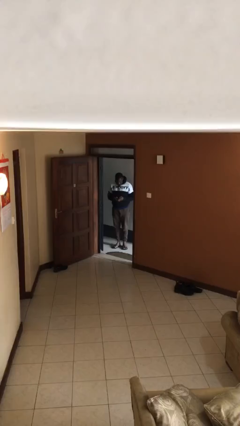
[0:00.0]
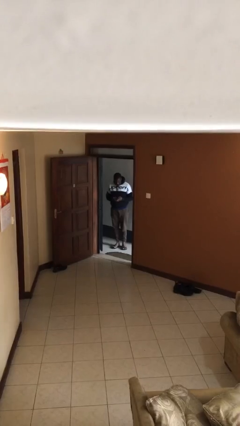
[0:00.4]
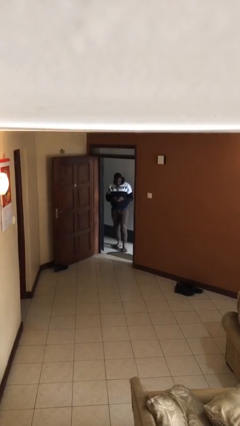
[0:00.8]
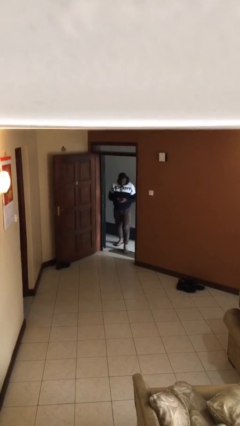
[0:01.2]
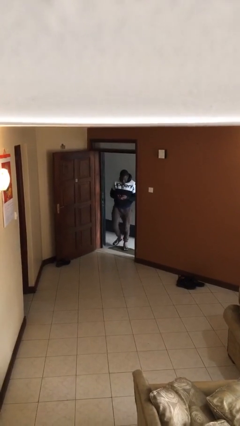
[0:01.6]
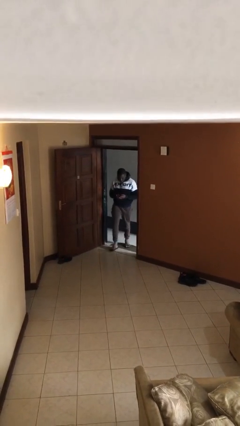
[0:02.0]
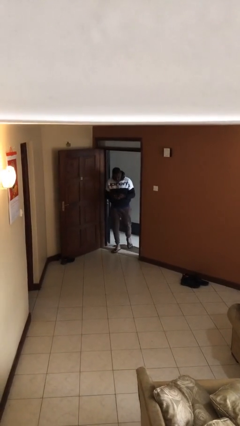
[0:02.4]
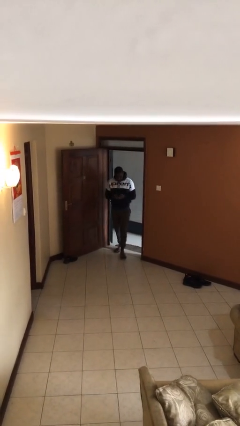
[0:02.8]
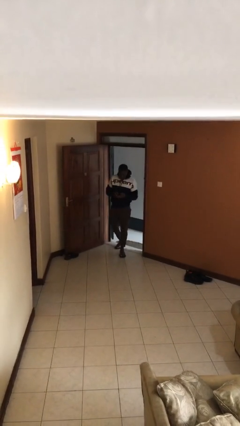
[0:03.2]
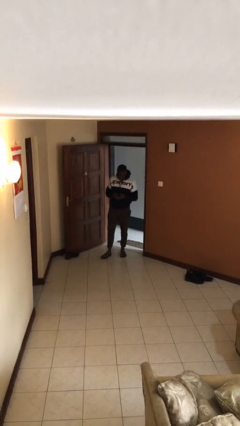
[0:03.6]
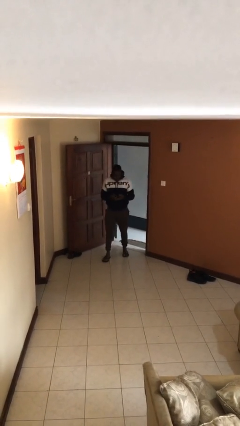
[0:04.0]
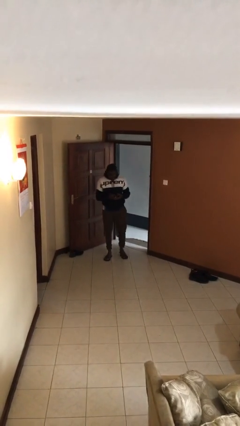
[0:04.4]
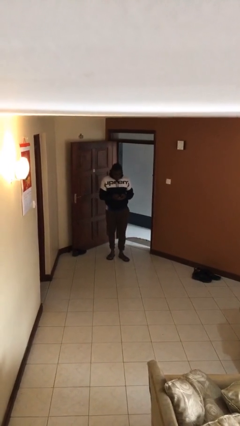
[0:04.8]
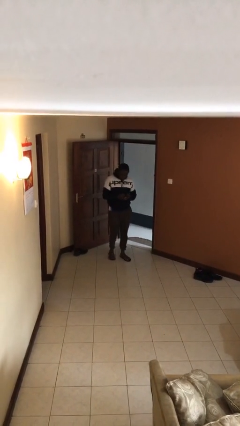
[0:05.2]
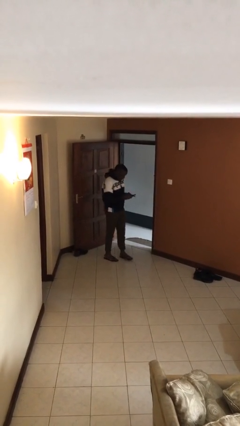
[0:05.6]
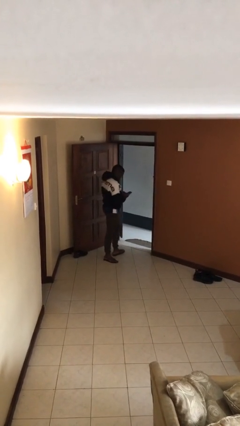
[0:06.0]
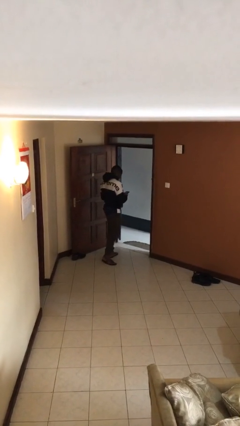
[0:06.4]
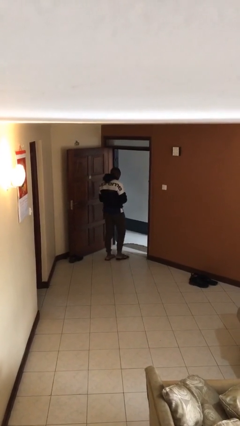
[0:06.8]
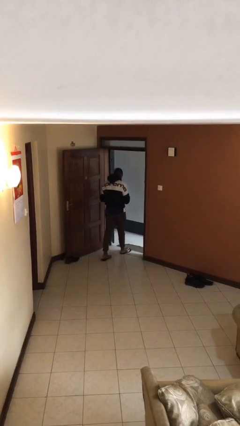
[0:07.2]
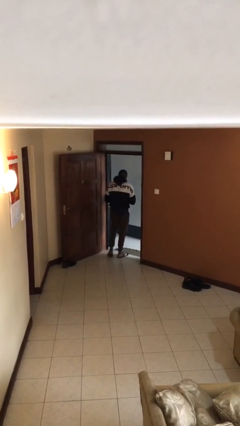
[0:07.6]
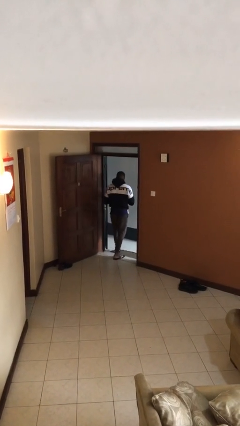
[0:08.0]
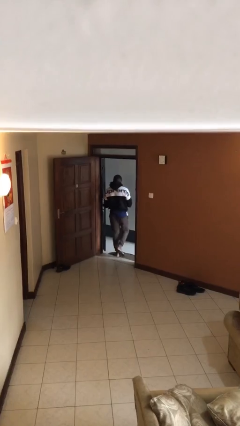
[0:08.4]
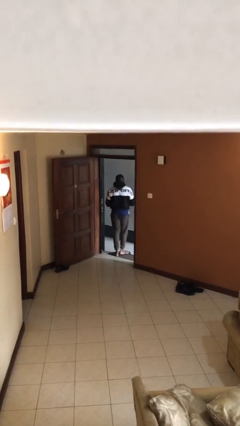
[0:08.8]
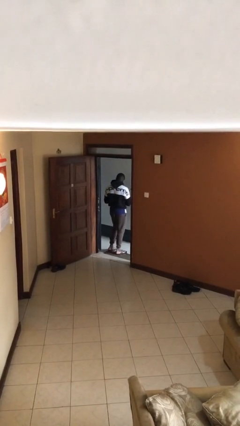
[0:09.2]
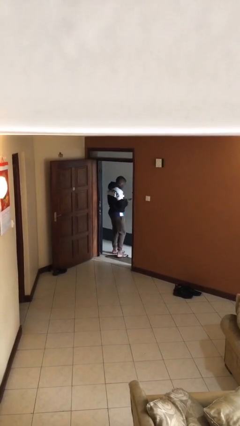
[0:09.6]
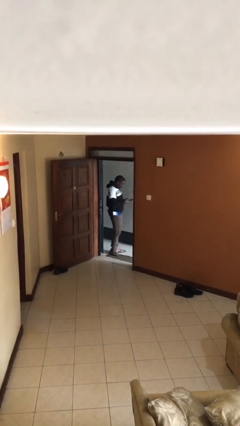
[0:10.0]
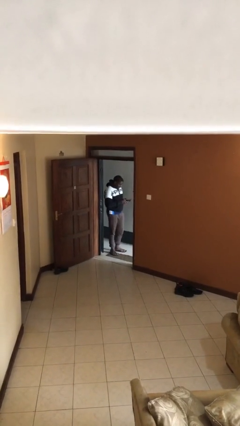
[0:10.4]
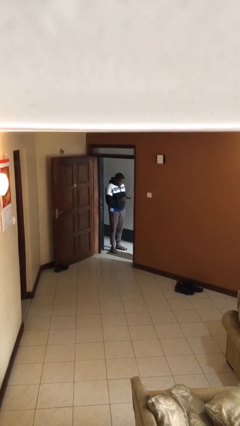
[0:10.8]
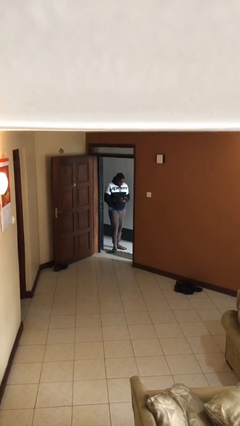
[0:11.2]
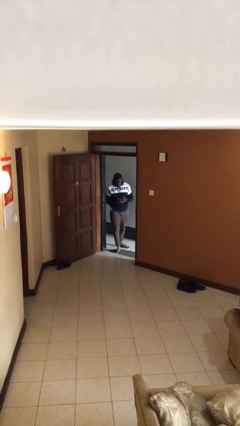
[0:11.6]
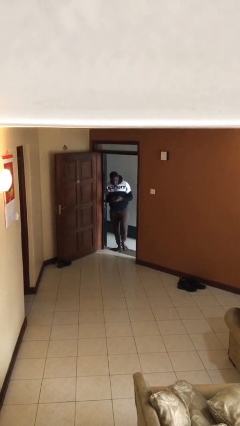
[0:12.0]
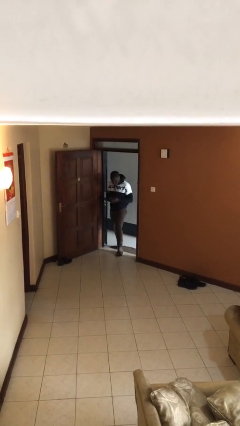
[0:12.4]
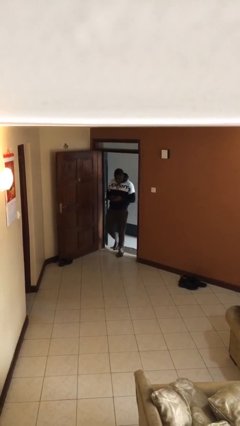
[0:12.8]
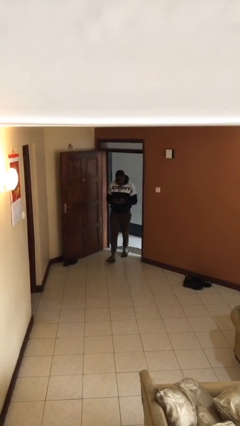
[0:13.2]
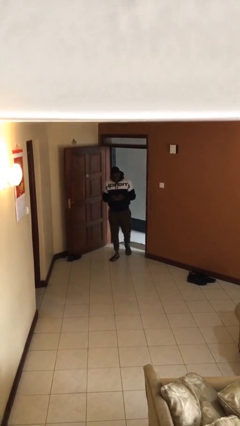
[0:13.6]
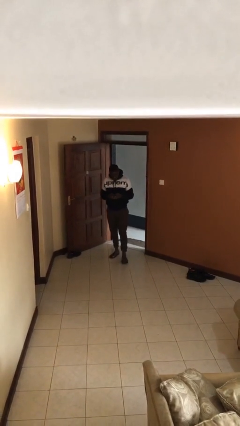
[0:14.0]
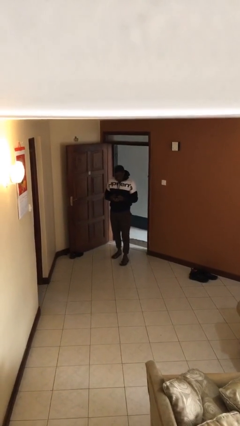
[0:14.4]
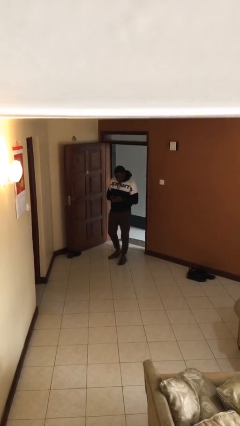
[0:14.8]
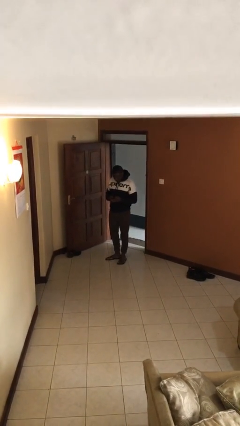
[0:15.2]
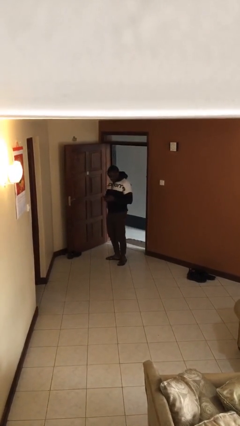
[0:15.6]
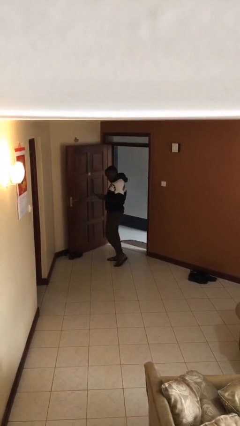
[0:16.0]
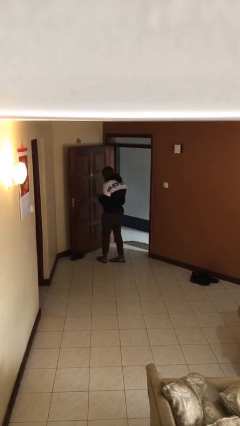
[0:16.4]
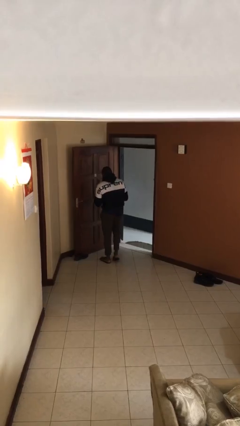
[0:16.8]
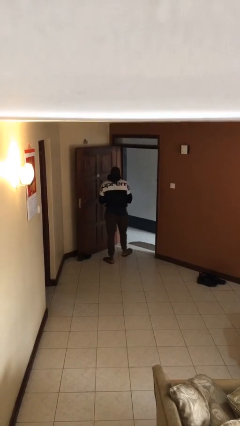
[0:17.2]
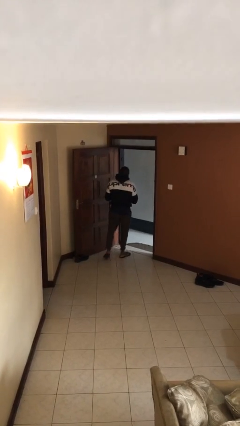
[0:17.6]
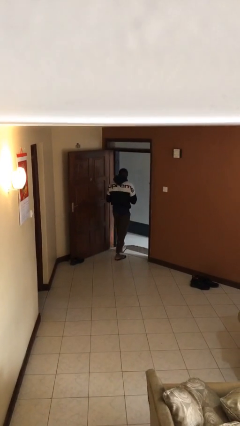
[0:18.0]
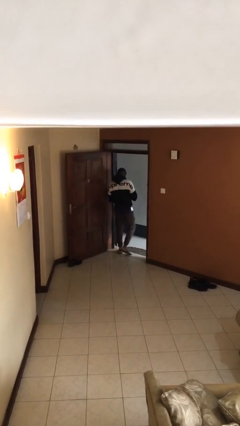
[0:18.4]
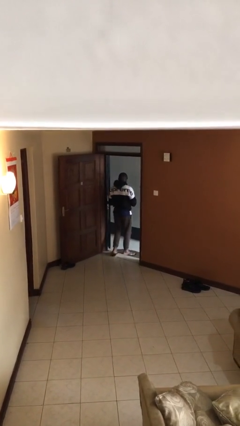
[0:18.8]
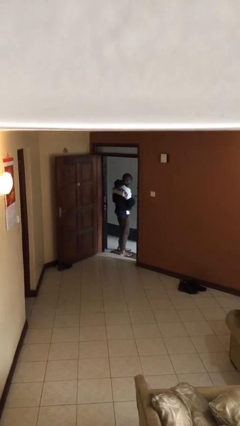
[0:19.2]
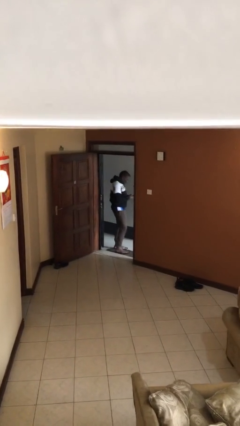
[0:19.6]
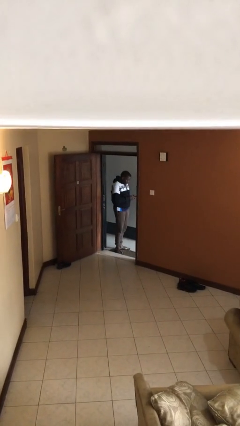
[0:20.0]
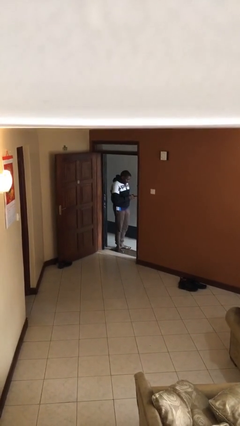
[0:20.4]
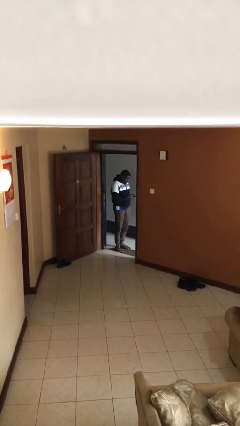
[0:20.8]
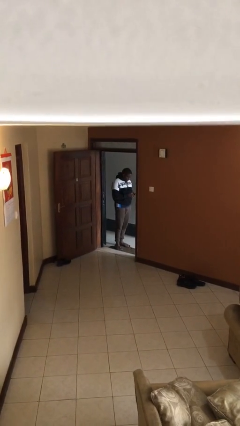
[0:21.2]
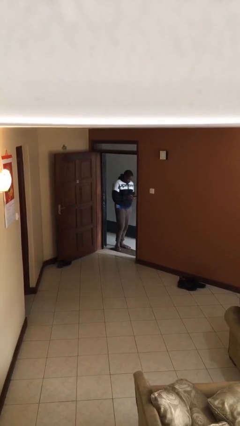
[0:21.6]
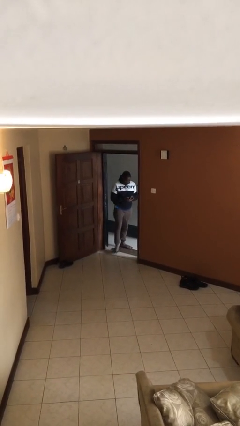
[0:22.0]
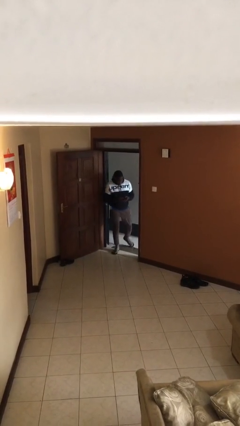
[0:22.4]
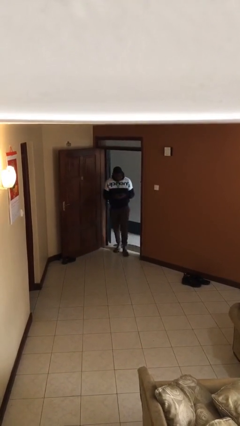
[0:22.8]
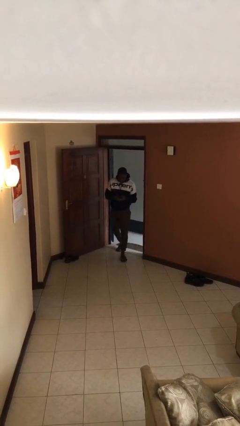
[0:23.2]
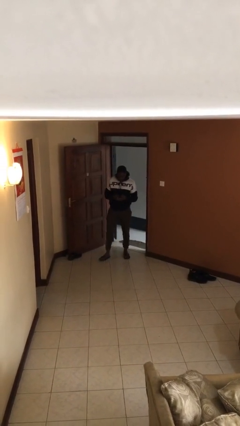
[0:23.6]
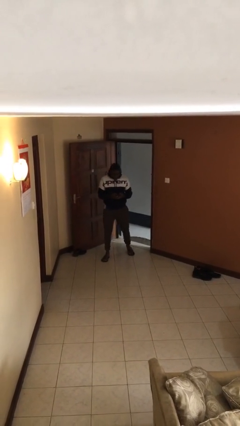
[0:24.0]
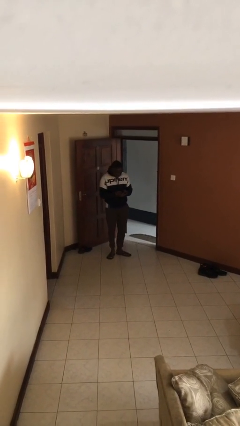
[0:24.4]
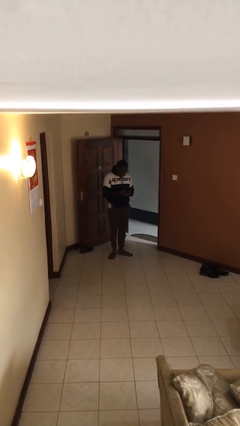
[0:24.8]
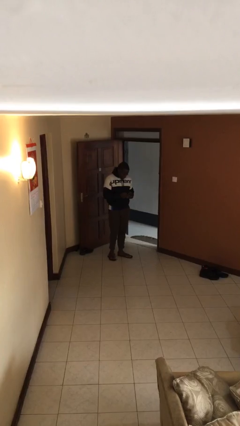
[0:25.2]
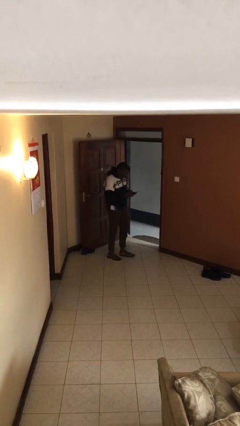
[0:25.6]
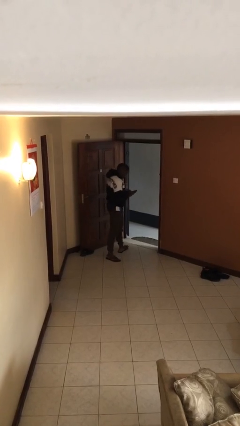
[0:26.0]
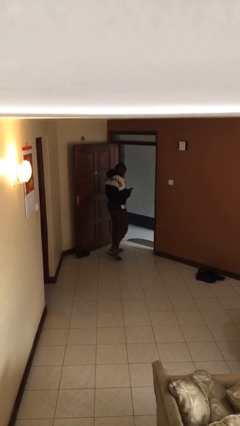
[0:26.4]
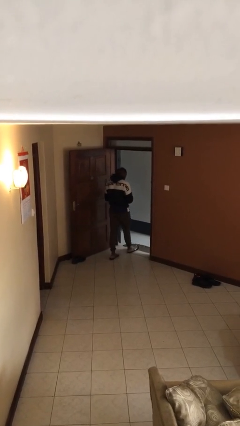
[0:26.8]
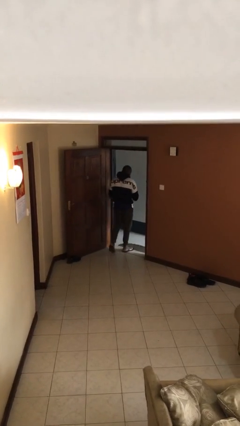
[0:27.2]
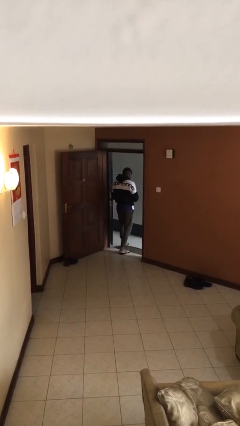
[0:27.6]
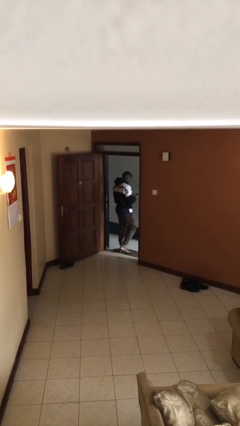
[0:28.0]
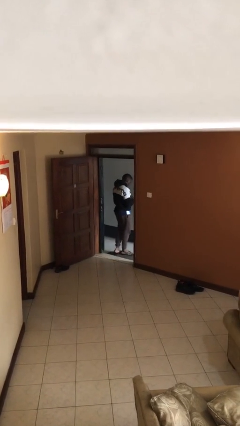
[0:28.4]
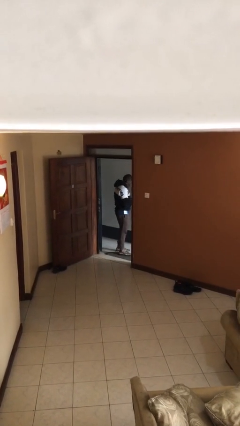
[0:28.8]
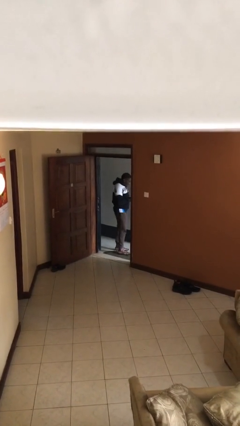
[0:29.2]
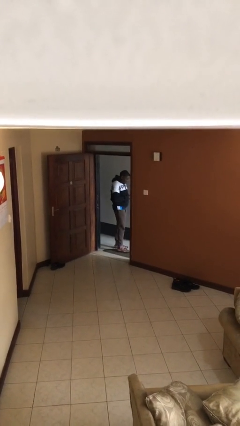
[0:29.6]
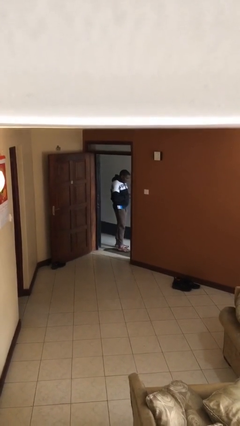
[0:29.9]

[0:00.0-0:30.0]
person texts on phone

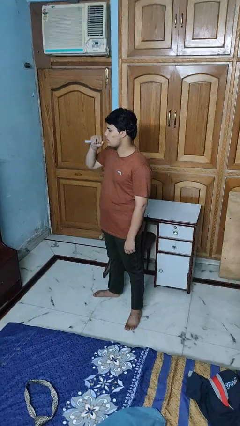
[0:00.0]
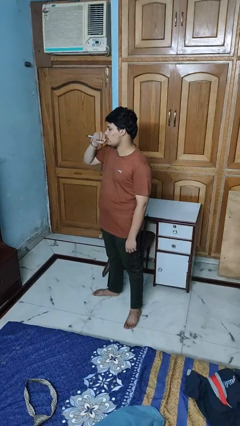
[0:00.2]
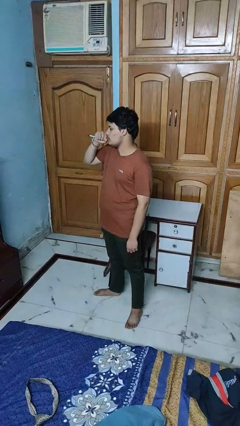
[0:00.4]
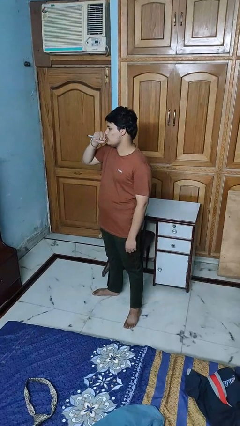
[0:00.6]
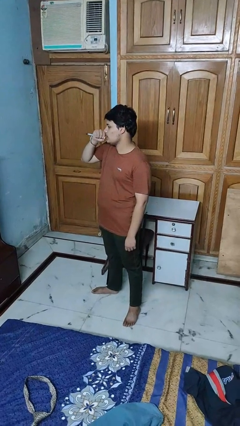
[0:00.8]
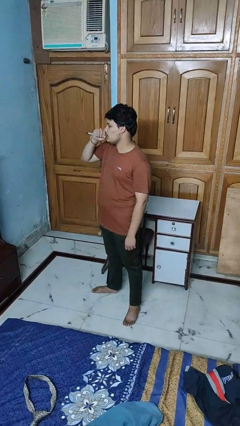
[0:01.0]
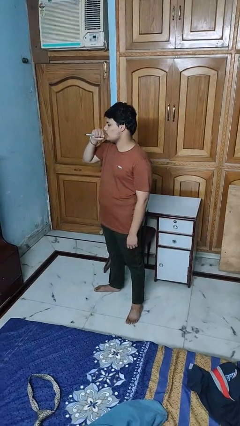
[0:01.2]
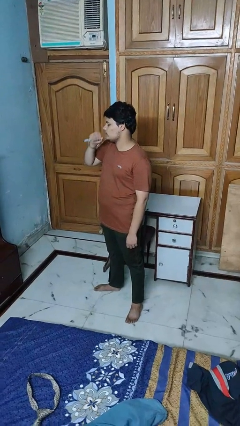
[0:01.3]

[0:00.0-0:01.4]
person vapes

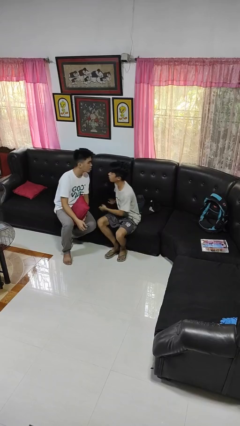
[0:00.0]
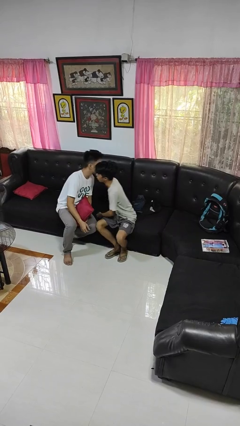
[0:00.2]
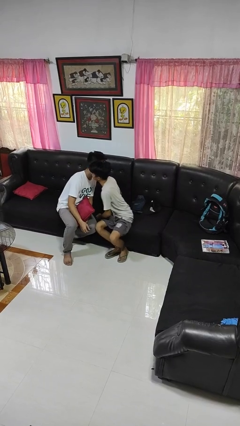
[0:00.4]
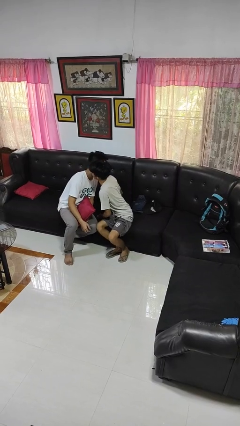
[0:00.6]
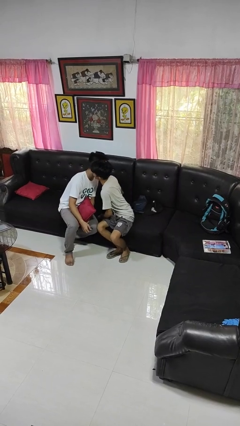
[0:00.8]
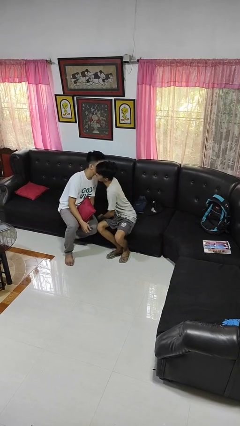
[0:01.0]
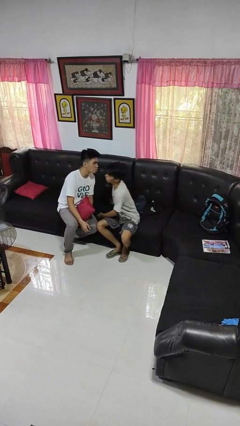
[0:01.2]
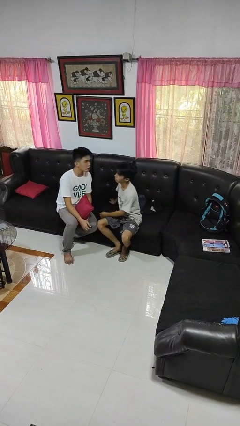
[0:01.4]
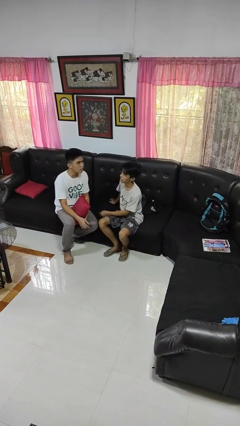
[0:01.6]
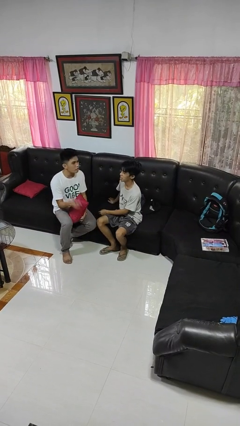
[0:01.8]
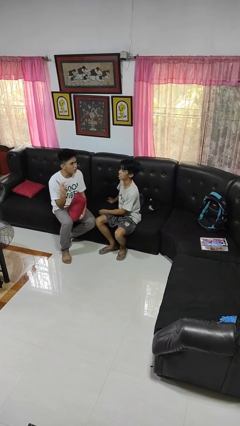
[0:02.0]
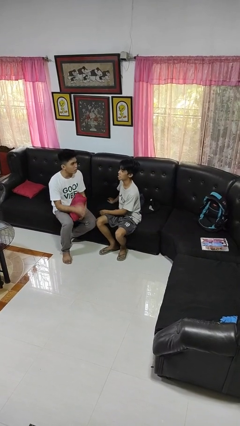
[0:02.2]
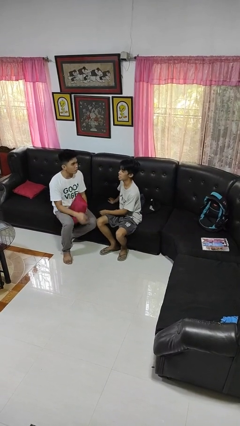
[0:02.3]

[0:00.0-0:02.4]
person kisses cheek of person
